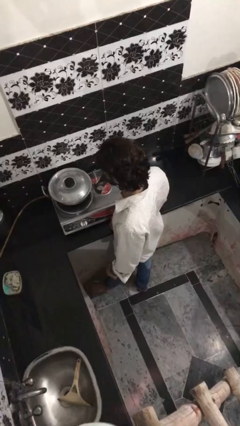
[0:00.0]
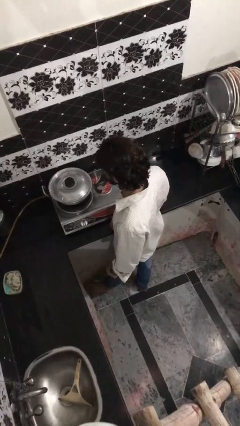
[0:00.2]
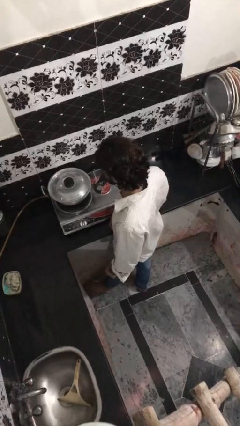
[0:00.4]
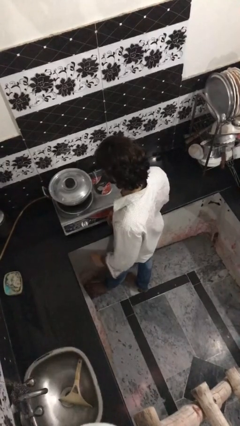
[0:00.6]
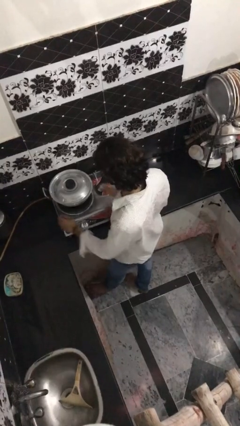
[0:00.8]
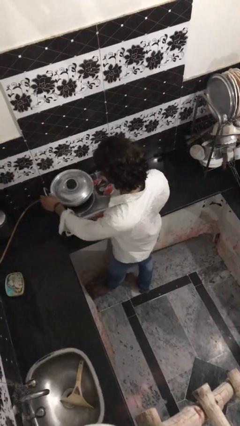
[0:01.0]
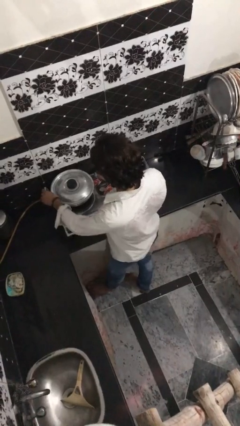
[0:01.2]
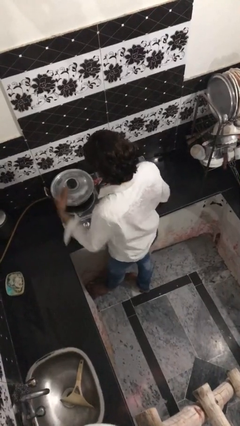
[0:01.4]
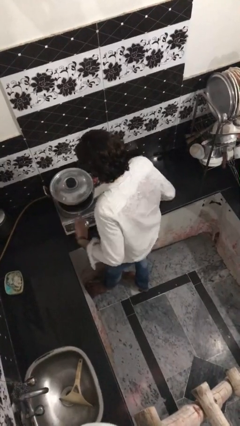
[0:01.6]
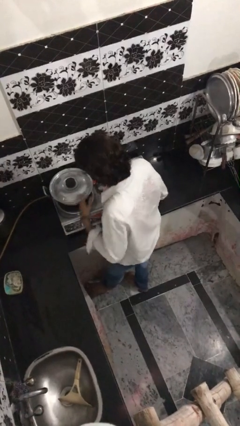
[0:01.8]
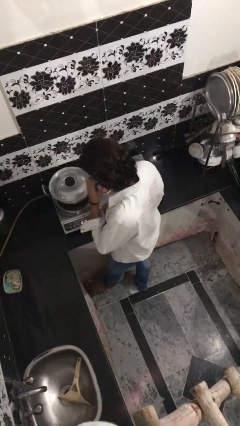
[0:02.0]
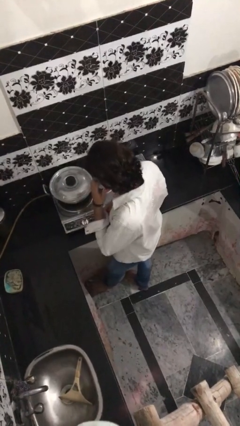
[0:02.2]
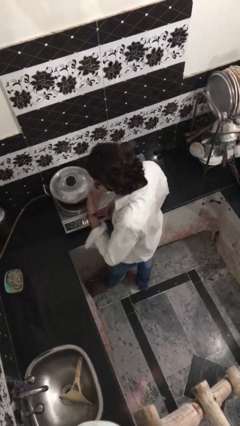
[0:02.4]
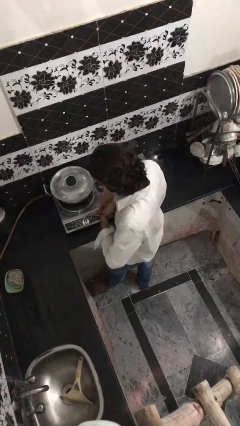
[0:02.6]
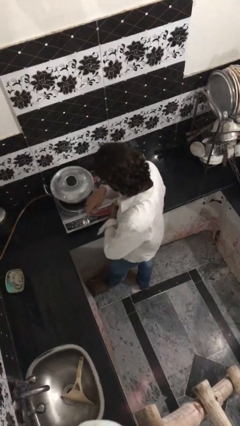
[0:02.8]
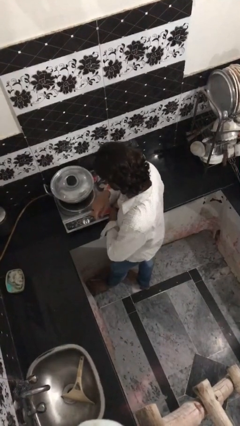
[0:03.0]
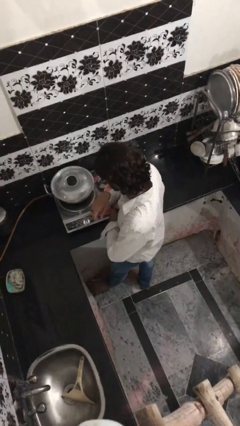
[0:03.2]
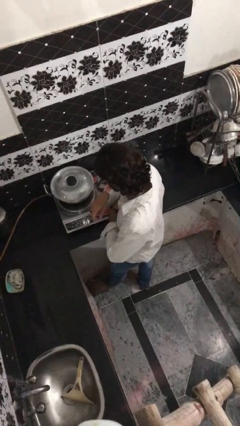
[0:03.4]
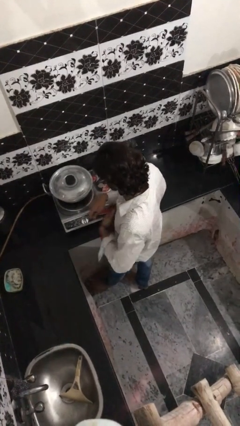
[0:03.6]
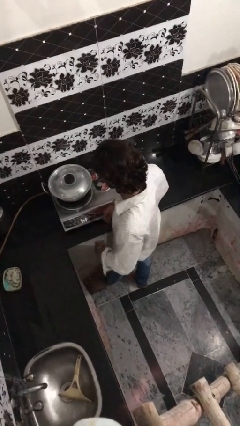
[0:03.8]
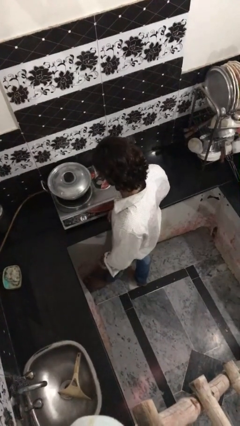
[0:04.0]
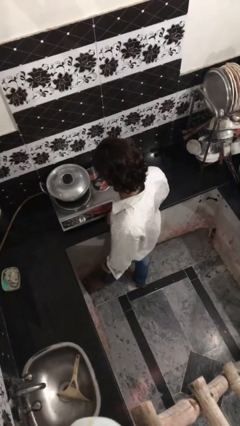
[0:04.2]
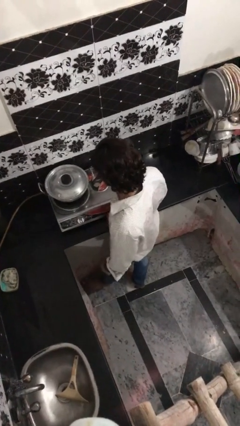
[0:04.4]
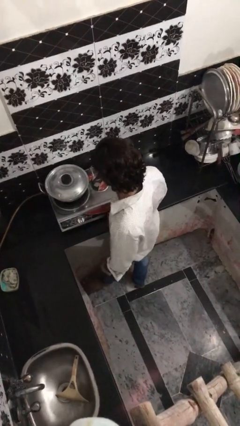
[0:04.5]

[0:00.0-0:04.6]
person burns hand

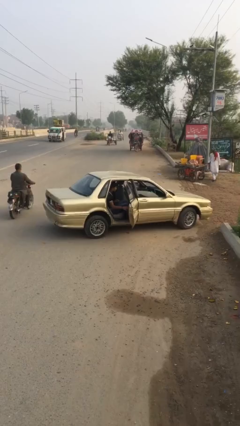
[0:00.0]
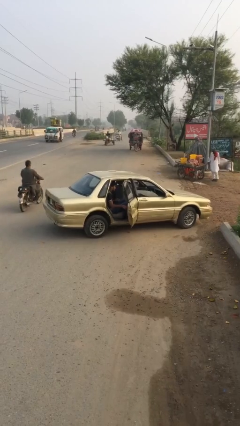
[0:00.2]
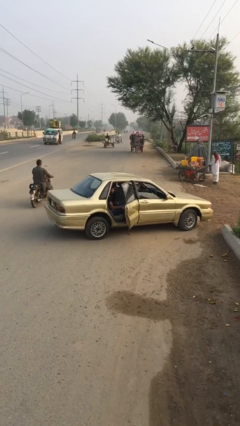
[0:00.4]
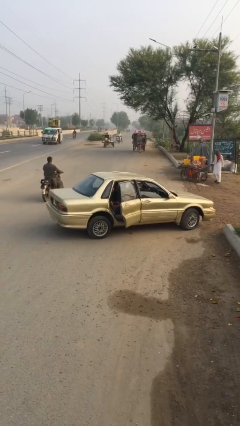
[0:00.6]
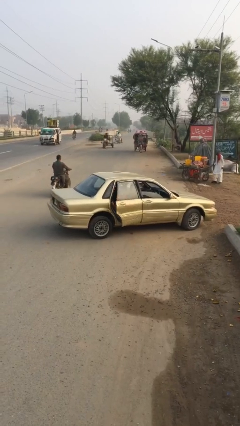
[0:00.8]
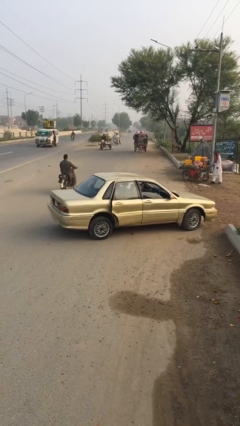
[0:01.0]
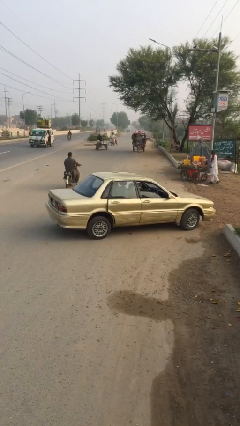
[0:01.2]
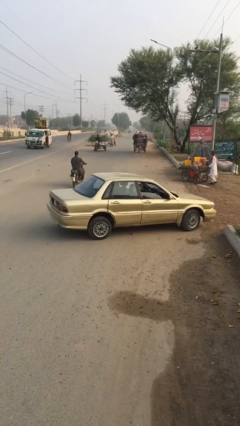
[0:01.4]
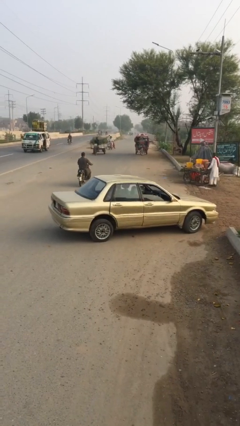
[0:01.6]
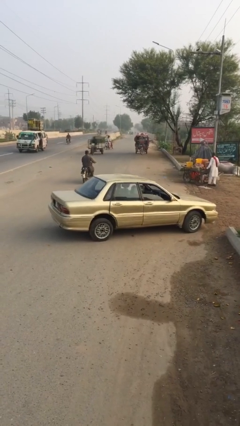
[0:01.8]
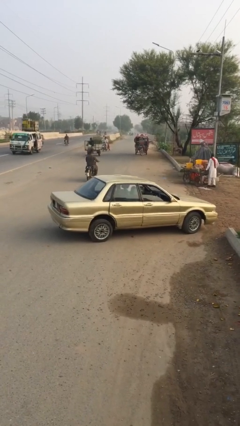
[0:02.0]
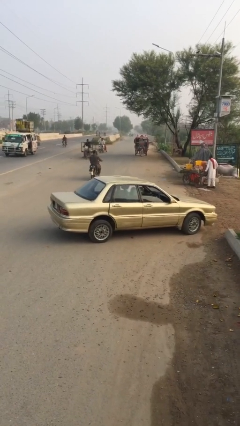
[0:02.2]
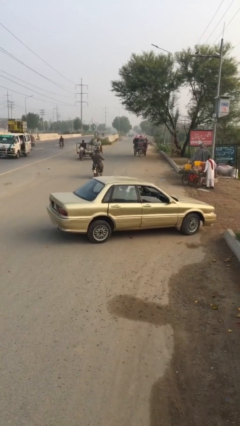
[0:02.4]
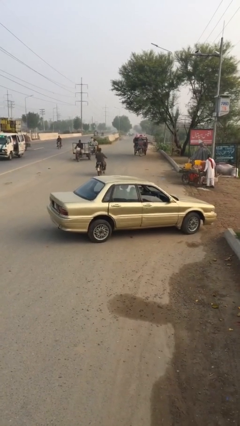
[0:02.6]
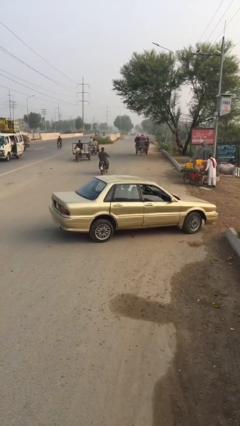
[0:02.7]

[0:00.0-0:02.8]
person closes car door

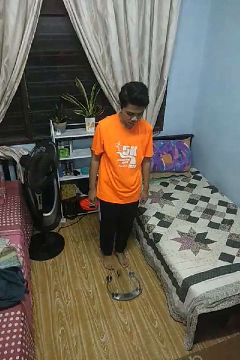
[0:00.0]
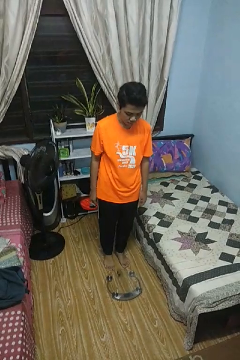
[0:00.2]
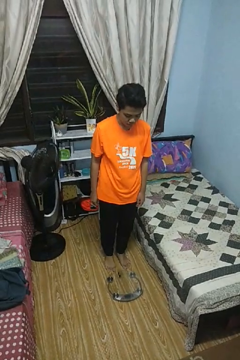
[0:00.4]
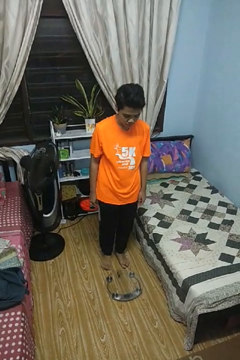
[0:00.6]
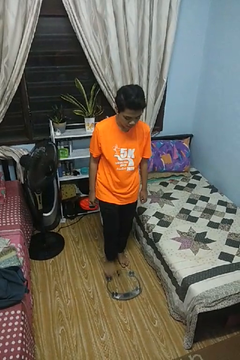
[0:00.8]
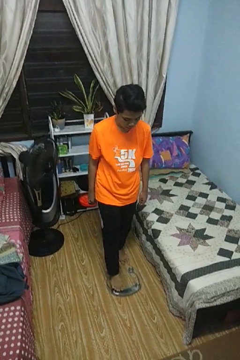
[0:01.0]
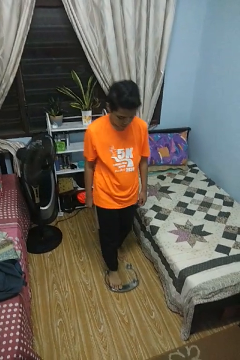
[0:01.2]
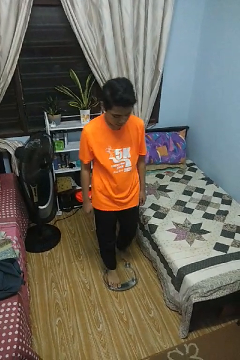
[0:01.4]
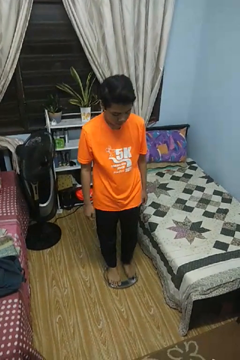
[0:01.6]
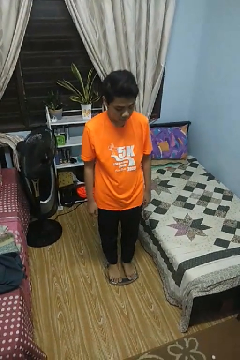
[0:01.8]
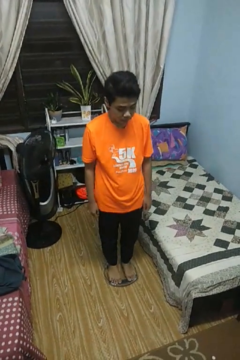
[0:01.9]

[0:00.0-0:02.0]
person uses bodyweight scale

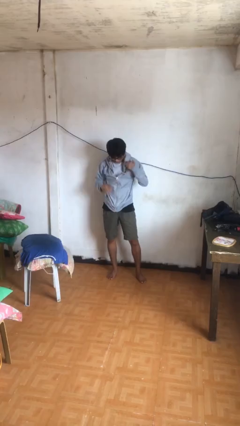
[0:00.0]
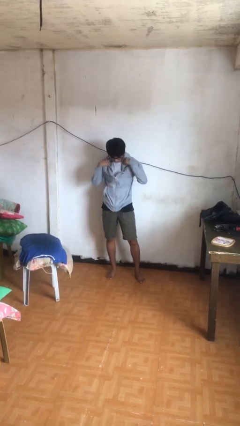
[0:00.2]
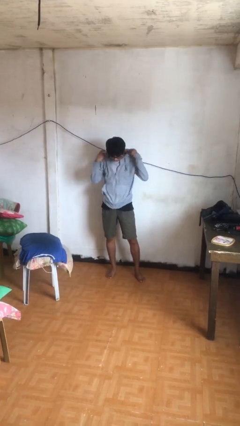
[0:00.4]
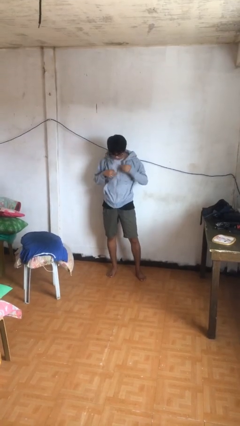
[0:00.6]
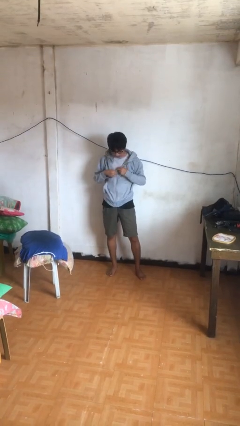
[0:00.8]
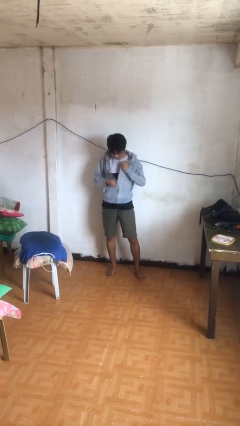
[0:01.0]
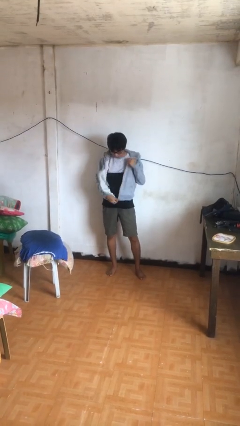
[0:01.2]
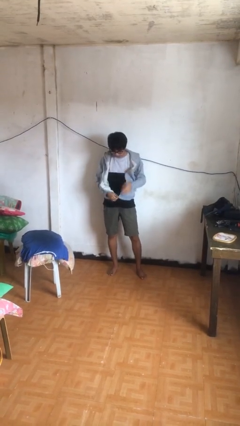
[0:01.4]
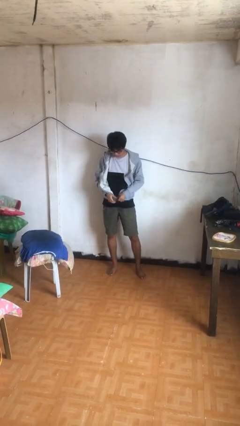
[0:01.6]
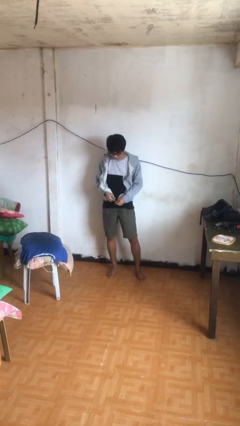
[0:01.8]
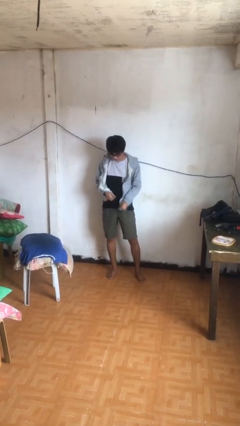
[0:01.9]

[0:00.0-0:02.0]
person unzips jacket

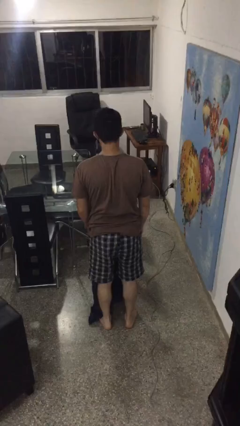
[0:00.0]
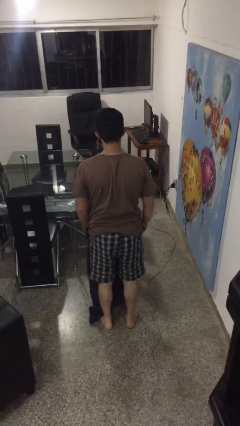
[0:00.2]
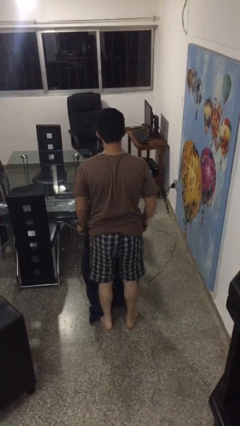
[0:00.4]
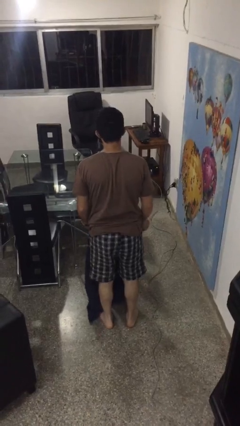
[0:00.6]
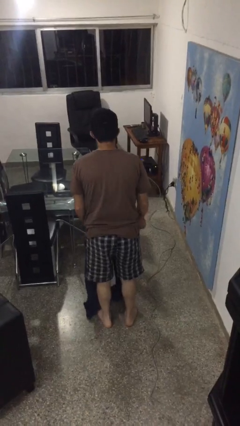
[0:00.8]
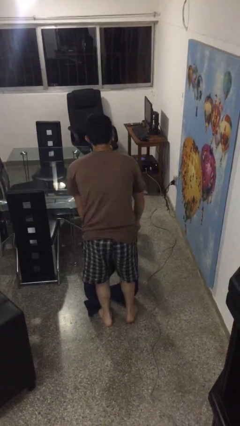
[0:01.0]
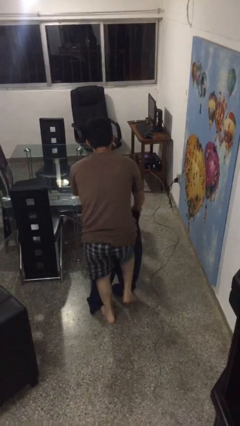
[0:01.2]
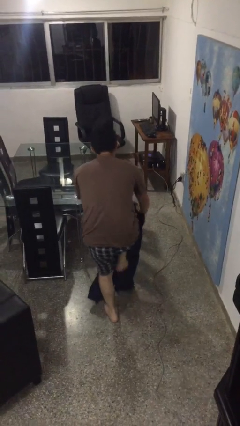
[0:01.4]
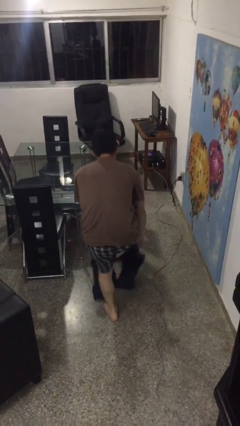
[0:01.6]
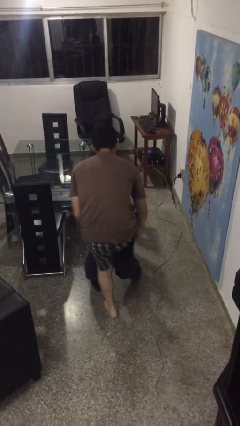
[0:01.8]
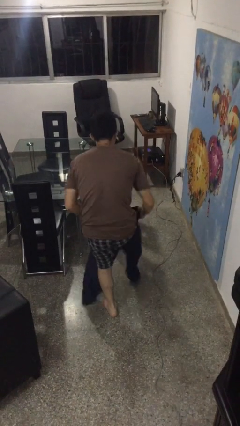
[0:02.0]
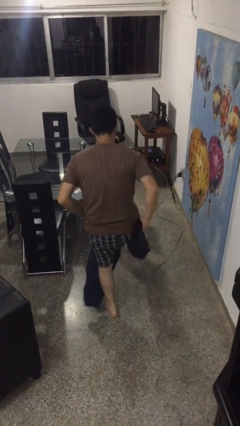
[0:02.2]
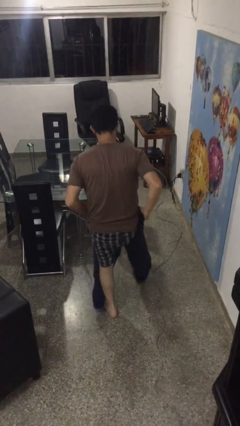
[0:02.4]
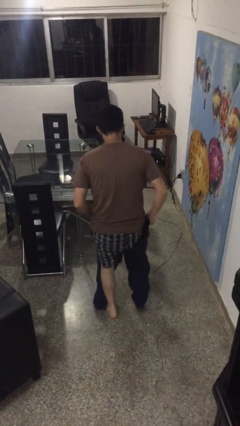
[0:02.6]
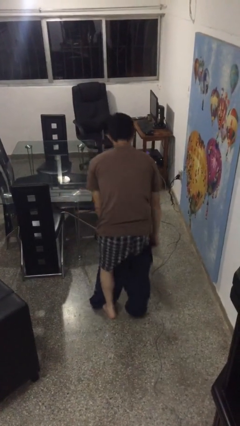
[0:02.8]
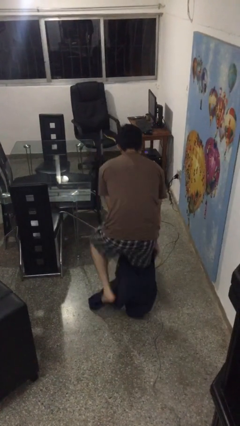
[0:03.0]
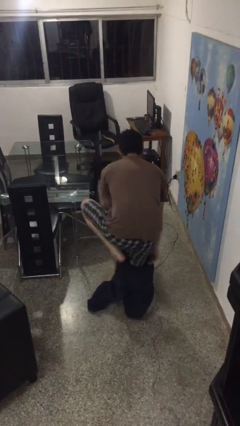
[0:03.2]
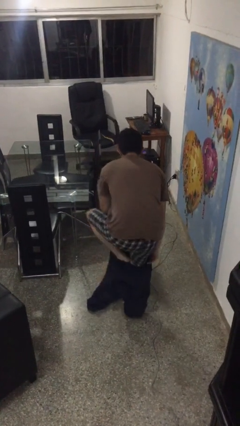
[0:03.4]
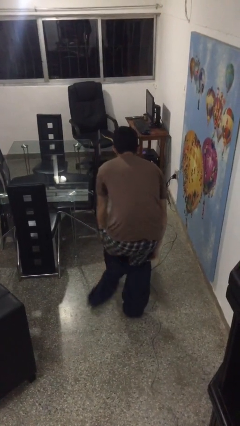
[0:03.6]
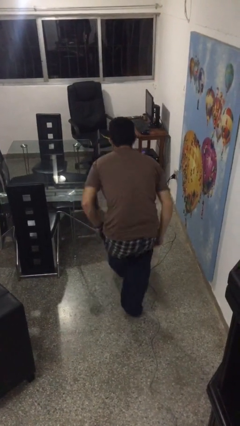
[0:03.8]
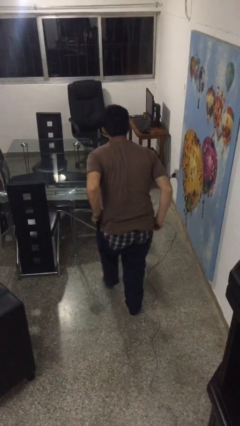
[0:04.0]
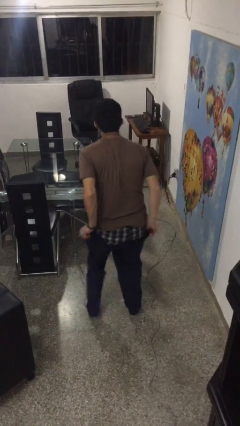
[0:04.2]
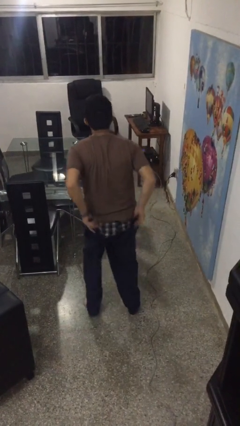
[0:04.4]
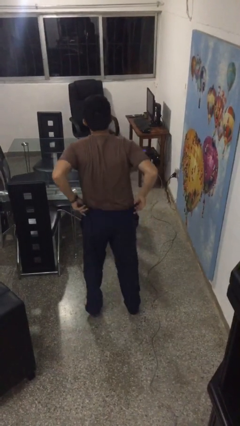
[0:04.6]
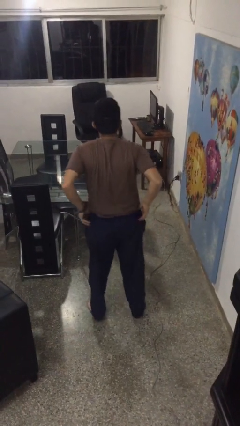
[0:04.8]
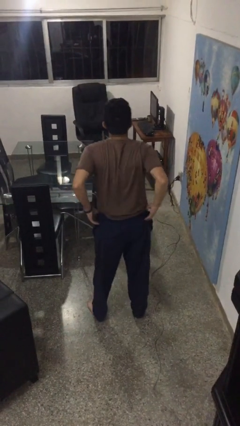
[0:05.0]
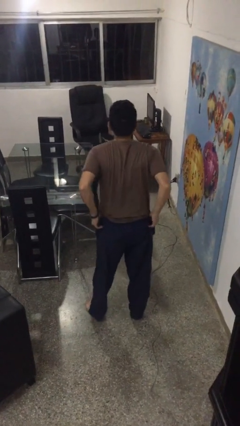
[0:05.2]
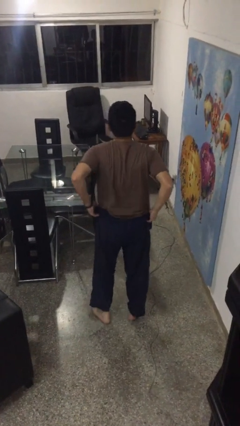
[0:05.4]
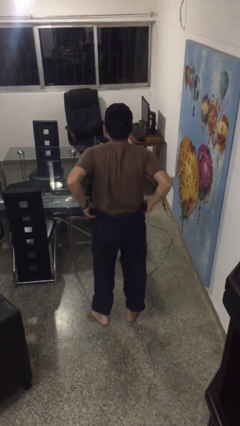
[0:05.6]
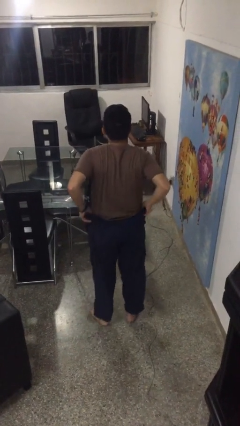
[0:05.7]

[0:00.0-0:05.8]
person puts on pants

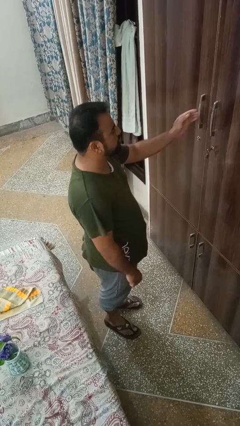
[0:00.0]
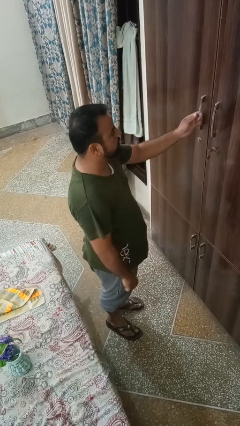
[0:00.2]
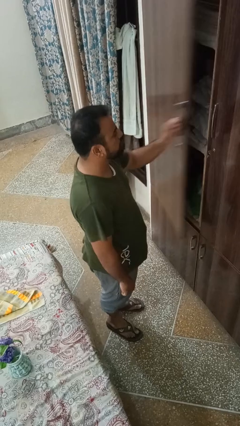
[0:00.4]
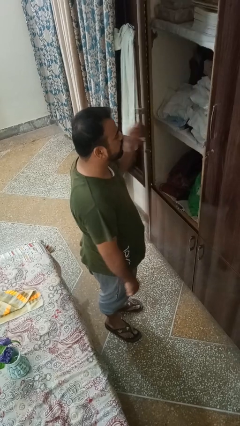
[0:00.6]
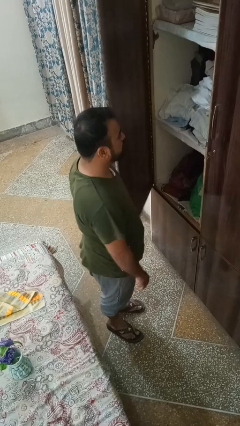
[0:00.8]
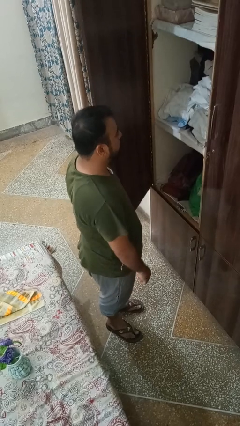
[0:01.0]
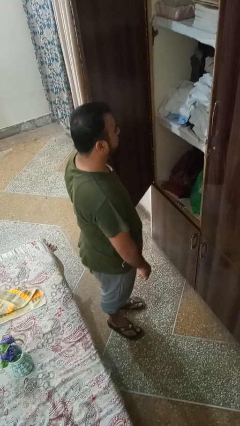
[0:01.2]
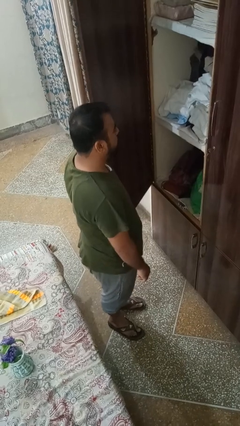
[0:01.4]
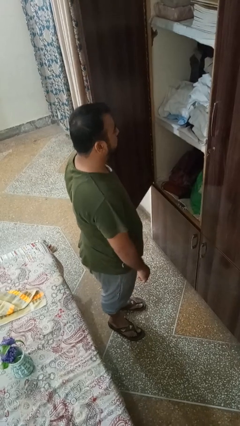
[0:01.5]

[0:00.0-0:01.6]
person opens closet door
